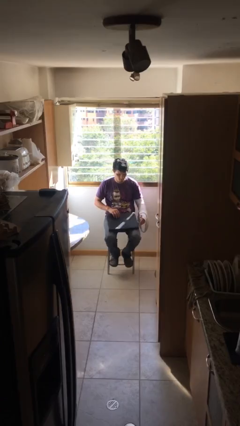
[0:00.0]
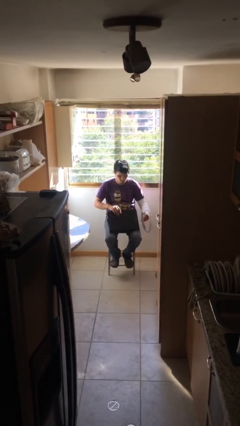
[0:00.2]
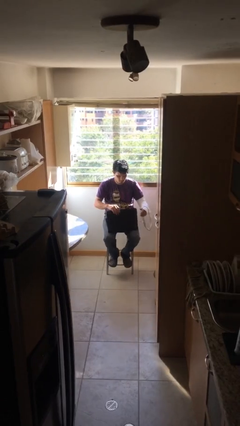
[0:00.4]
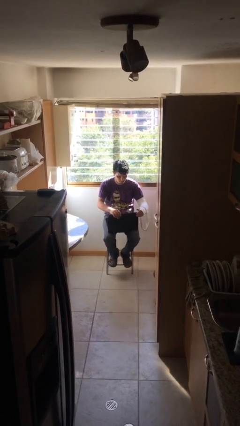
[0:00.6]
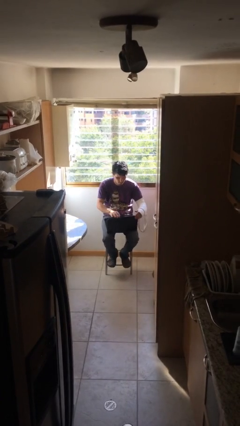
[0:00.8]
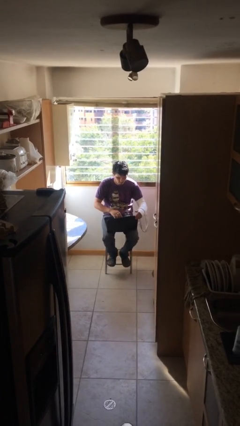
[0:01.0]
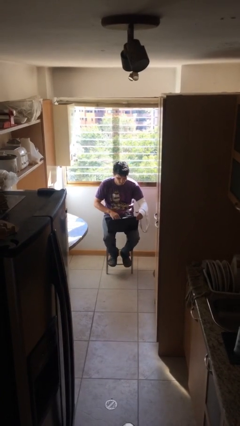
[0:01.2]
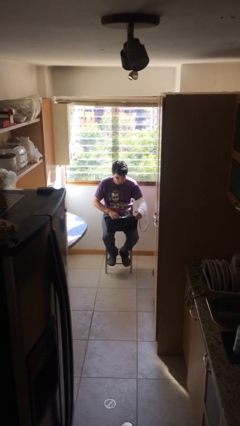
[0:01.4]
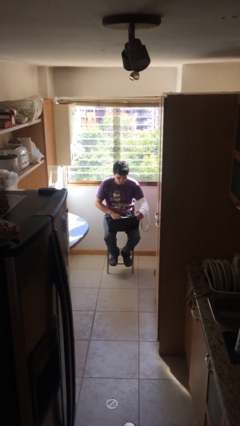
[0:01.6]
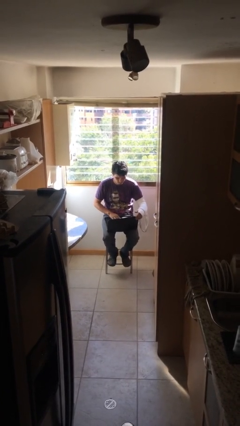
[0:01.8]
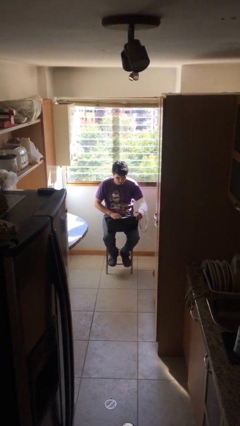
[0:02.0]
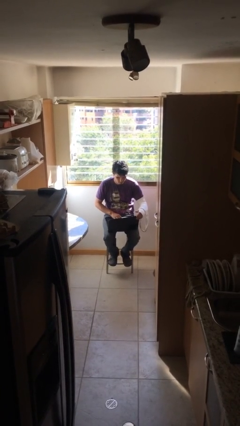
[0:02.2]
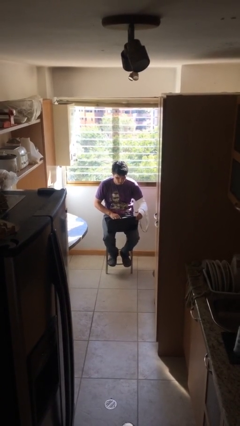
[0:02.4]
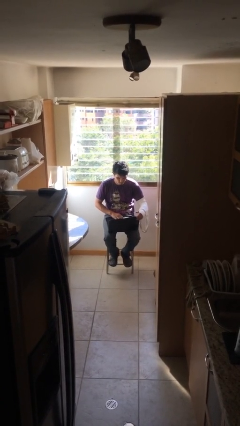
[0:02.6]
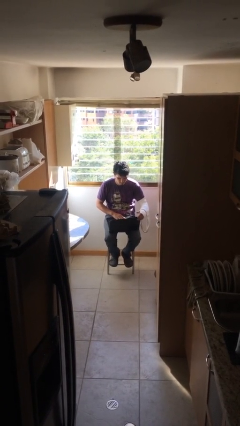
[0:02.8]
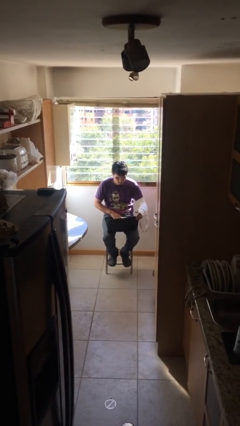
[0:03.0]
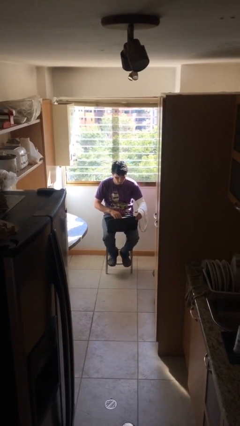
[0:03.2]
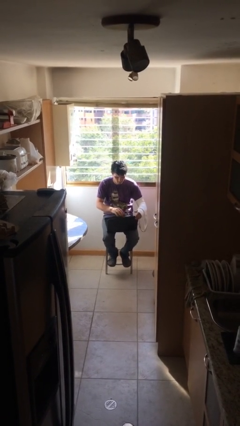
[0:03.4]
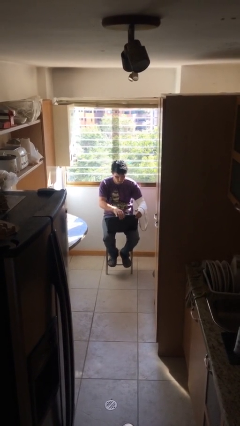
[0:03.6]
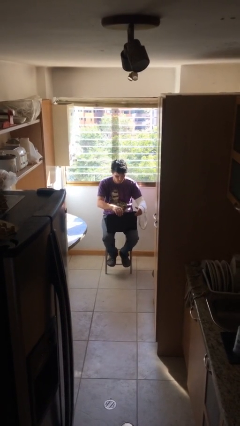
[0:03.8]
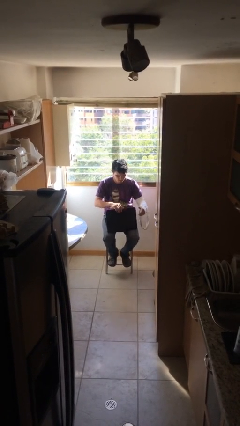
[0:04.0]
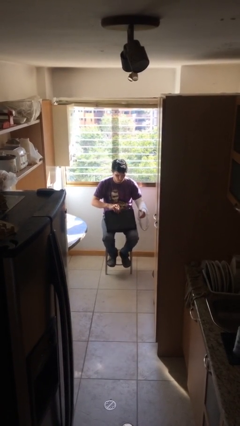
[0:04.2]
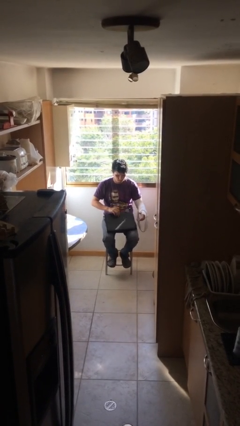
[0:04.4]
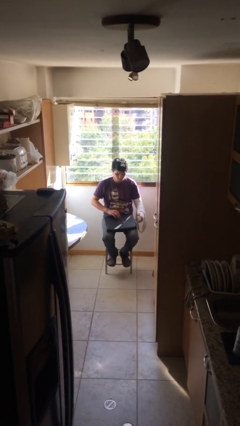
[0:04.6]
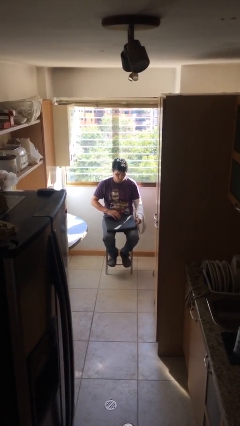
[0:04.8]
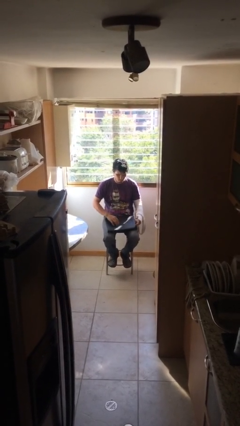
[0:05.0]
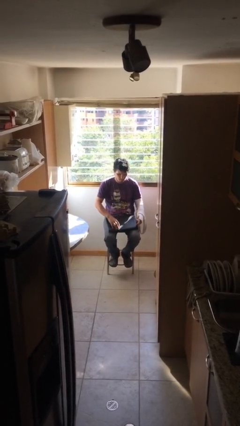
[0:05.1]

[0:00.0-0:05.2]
person interacts with laptop

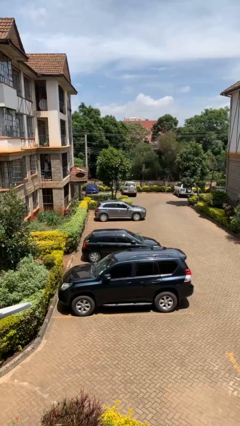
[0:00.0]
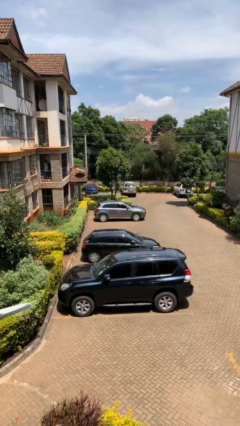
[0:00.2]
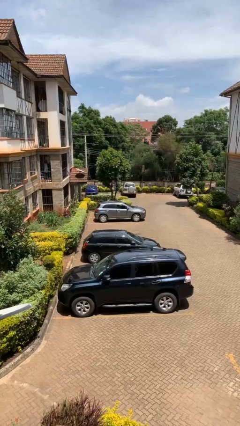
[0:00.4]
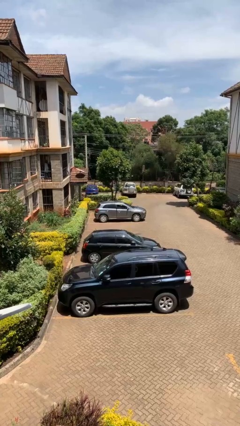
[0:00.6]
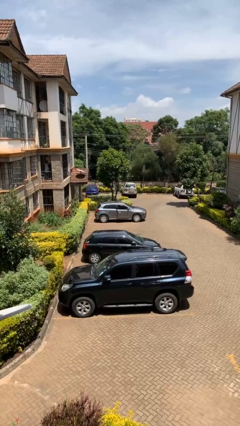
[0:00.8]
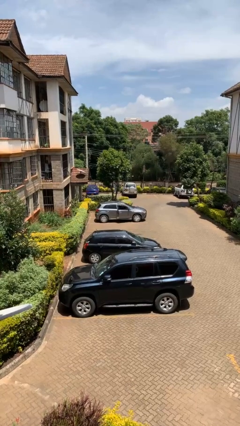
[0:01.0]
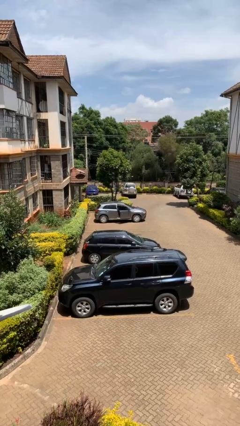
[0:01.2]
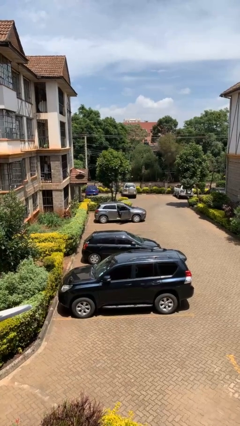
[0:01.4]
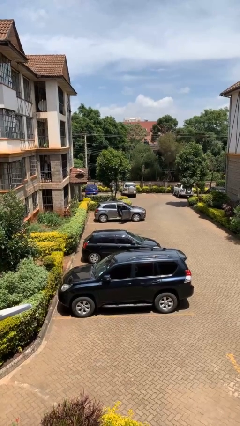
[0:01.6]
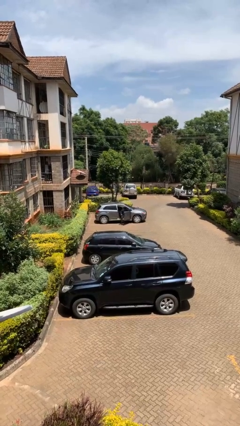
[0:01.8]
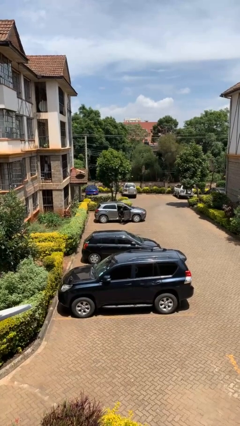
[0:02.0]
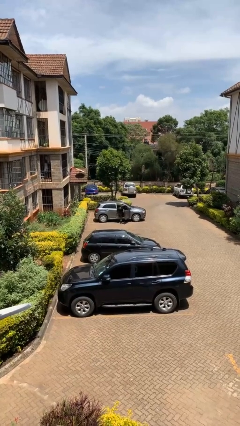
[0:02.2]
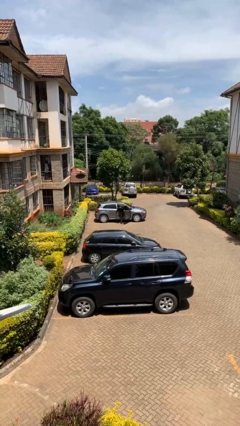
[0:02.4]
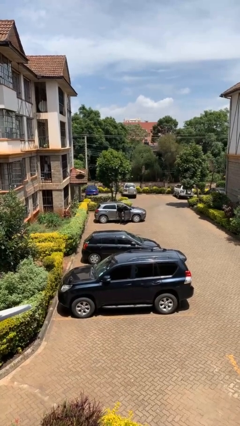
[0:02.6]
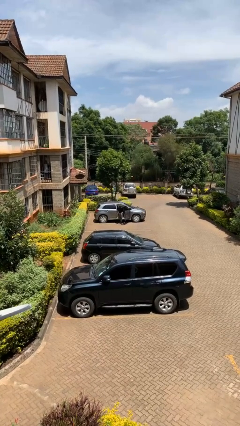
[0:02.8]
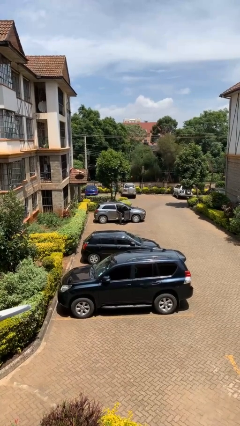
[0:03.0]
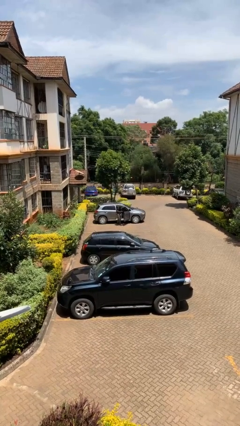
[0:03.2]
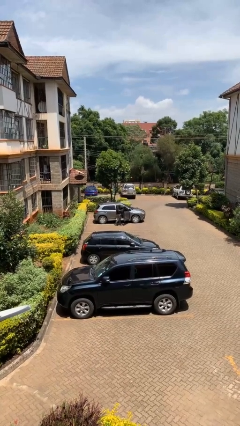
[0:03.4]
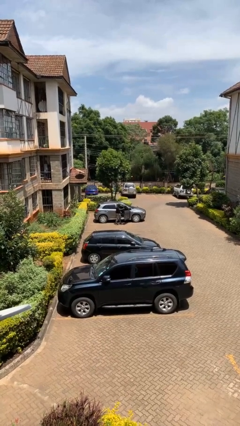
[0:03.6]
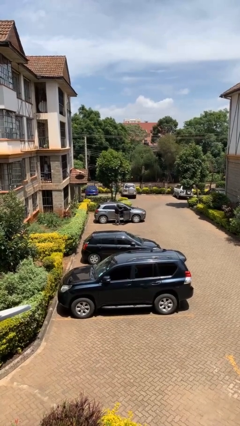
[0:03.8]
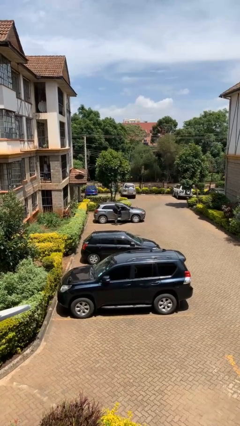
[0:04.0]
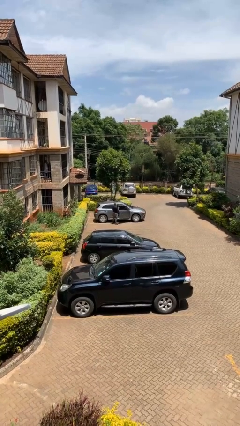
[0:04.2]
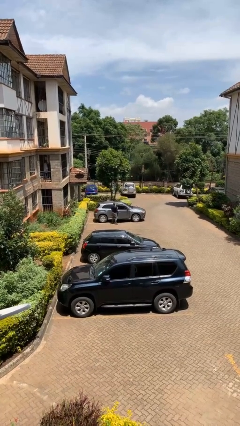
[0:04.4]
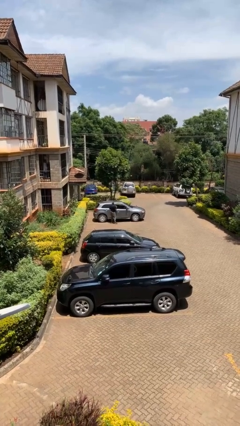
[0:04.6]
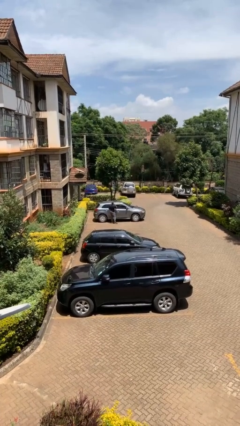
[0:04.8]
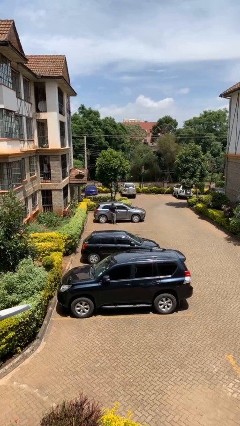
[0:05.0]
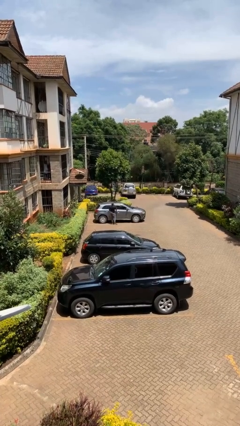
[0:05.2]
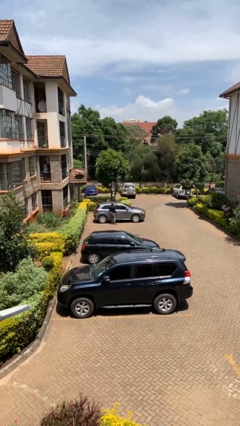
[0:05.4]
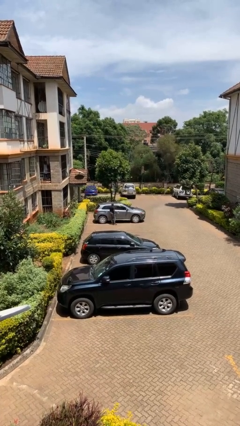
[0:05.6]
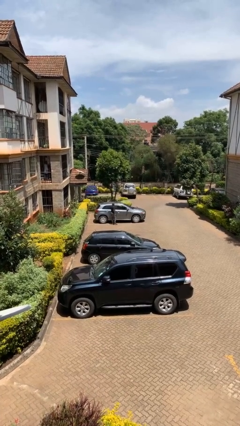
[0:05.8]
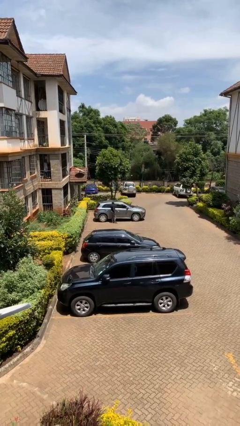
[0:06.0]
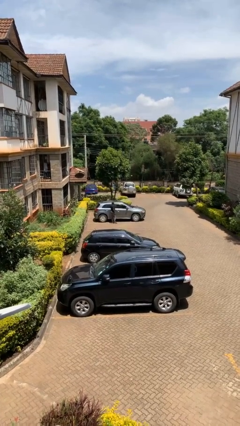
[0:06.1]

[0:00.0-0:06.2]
car drops off person

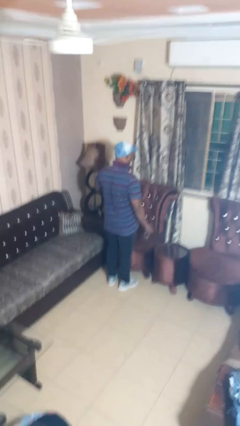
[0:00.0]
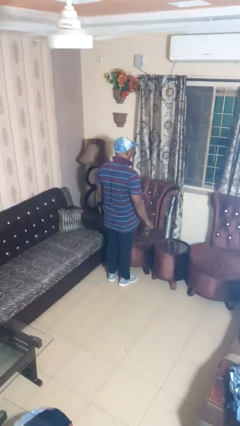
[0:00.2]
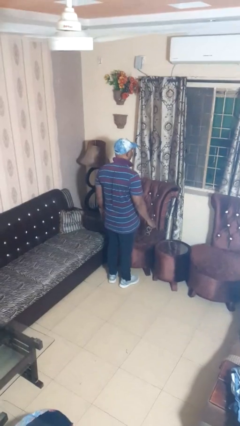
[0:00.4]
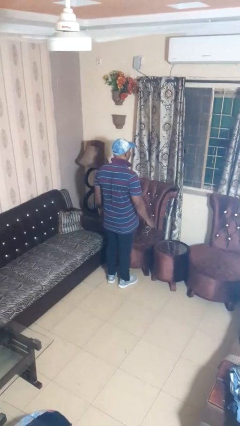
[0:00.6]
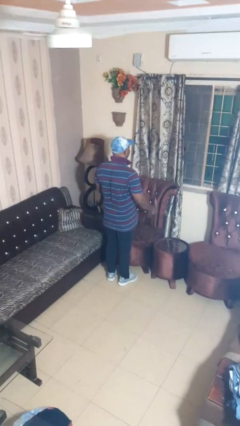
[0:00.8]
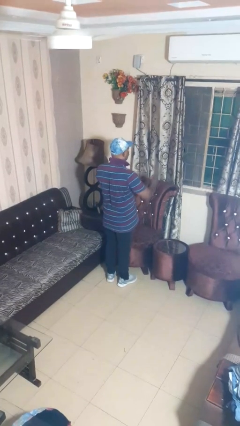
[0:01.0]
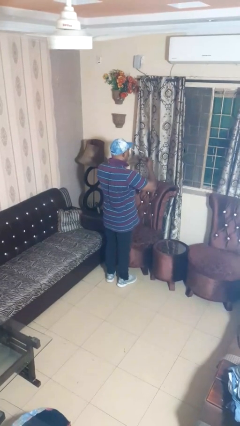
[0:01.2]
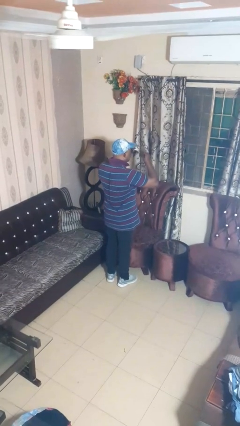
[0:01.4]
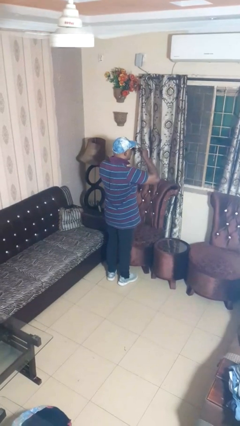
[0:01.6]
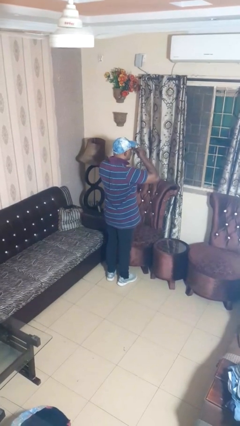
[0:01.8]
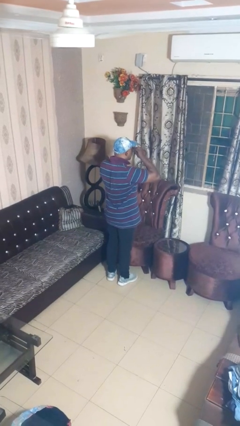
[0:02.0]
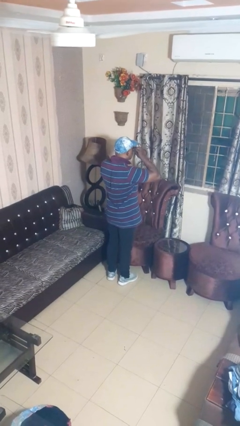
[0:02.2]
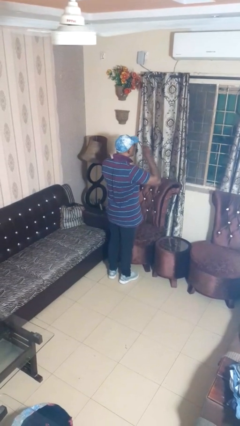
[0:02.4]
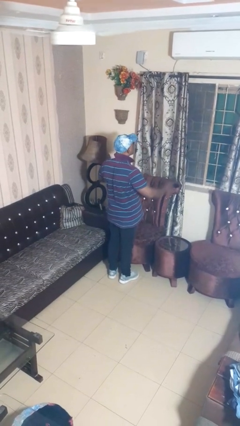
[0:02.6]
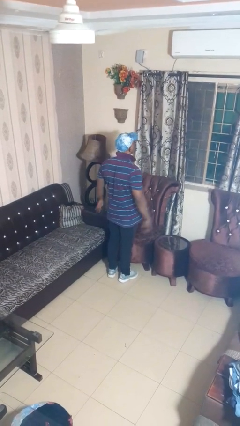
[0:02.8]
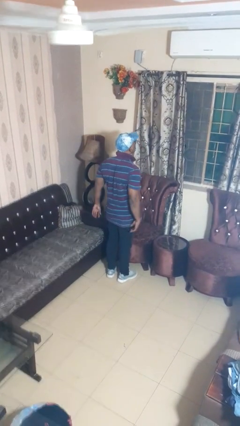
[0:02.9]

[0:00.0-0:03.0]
person puts on sunglasses

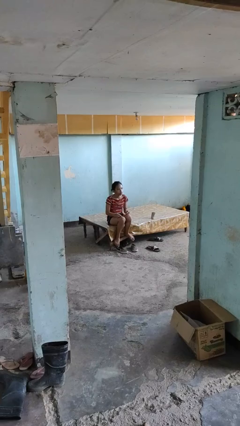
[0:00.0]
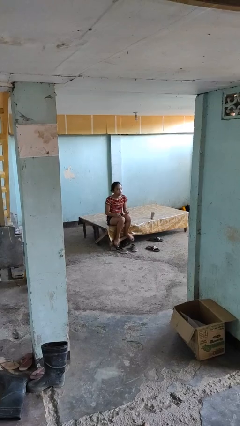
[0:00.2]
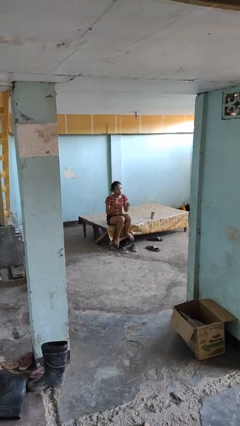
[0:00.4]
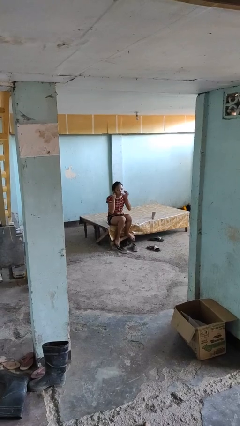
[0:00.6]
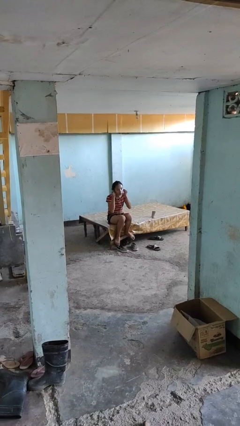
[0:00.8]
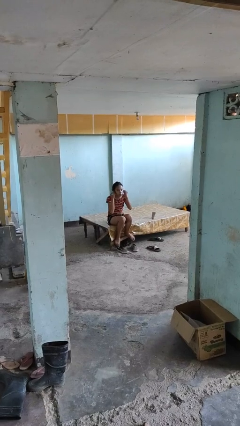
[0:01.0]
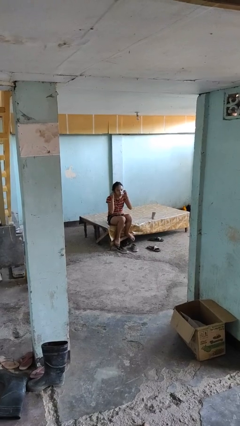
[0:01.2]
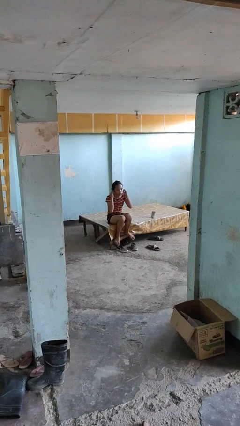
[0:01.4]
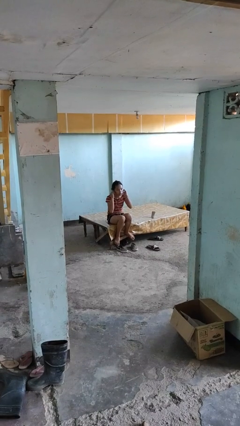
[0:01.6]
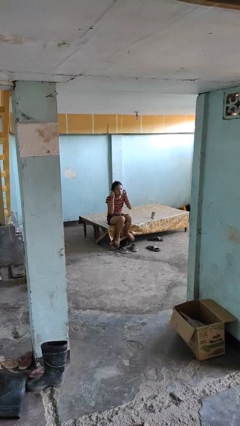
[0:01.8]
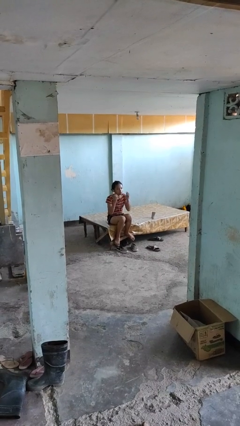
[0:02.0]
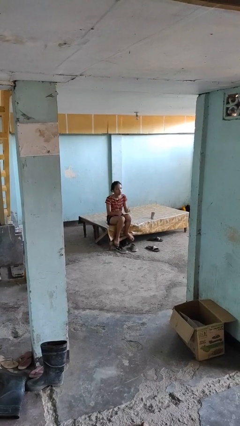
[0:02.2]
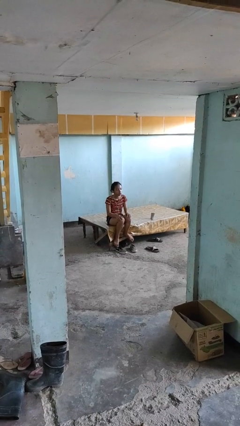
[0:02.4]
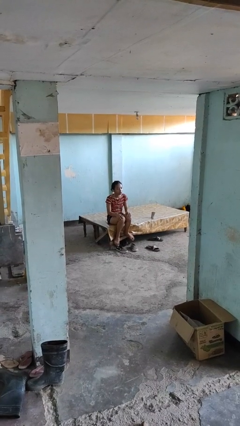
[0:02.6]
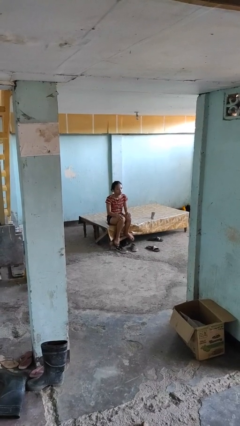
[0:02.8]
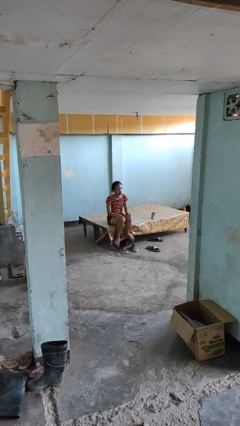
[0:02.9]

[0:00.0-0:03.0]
person puts on headphones

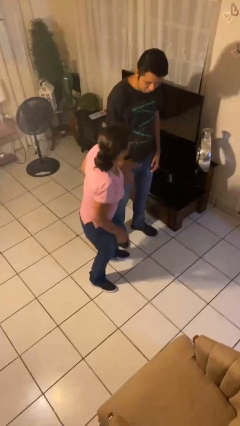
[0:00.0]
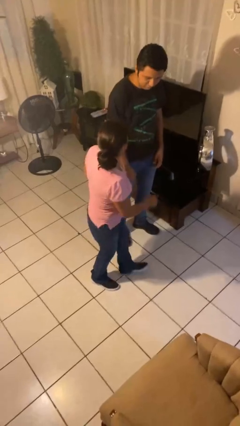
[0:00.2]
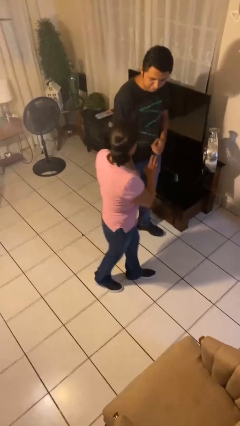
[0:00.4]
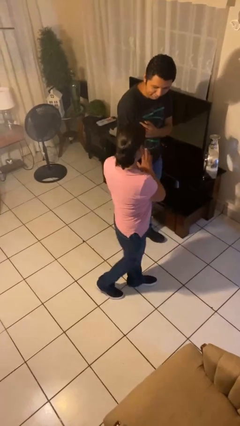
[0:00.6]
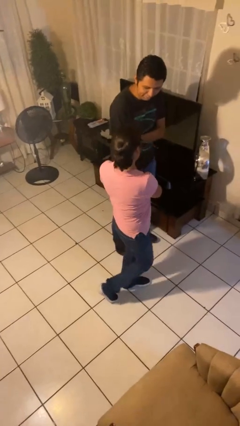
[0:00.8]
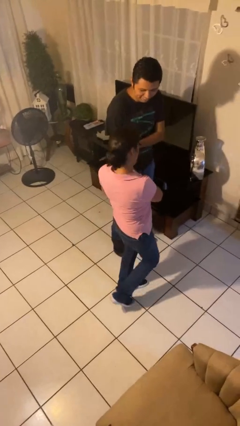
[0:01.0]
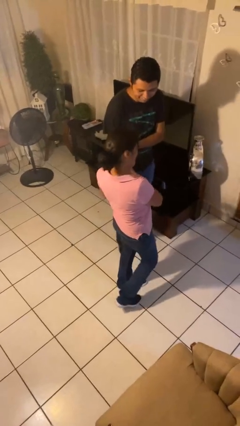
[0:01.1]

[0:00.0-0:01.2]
person bumps into person
